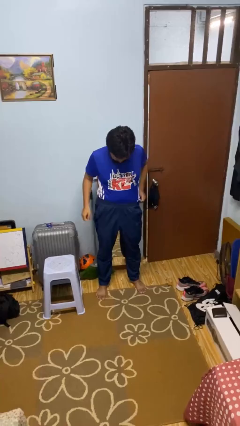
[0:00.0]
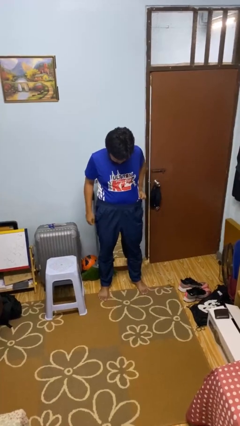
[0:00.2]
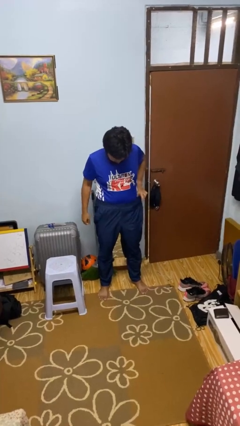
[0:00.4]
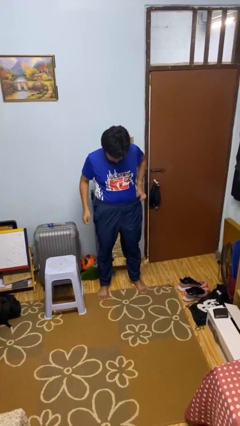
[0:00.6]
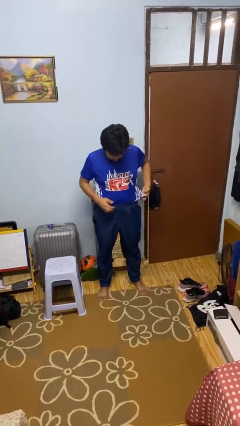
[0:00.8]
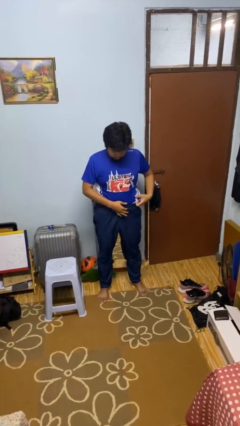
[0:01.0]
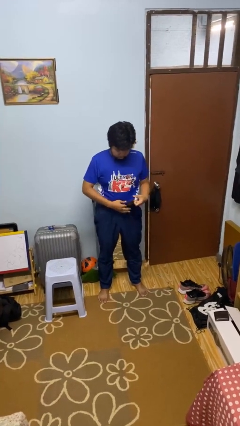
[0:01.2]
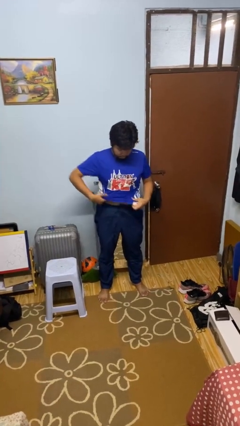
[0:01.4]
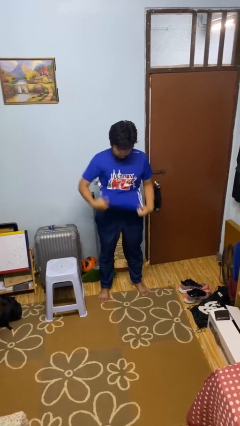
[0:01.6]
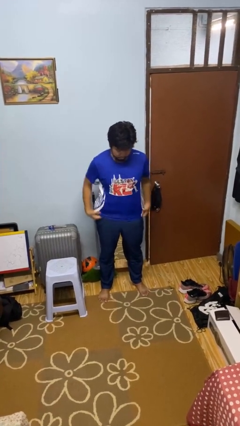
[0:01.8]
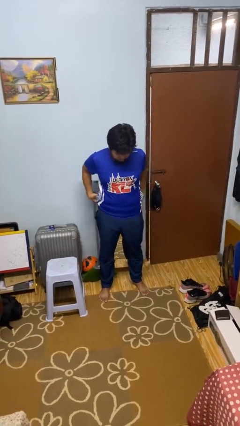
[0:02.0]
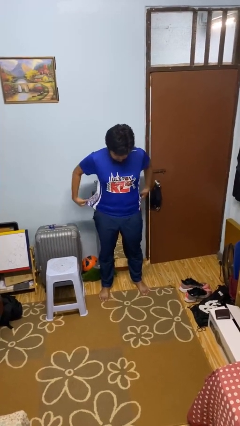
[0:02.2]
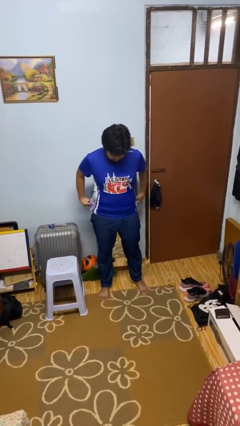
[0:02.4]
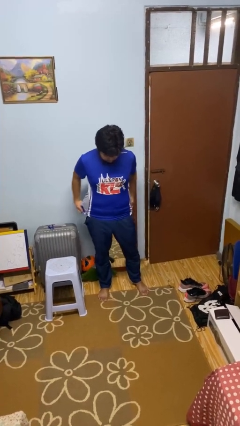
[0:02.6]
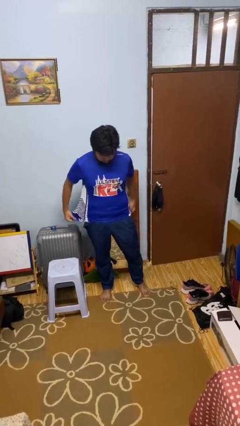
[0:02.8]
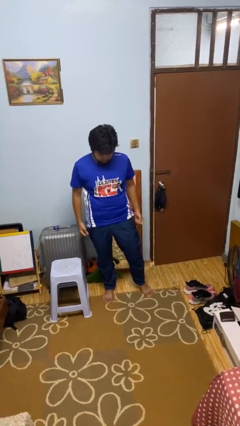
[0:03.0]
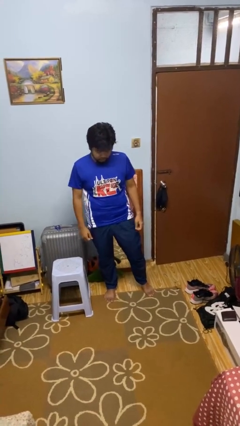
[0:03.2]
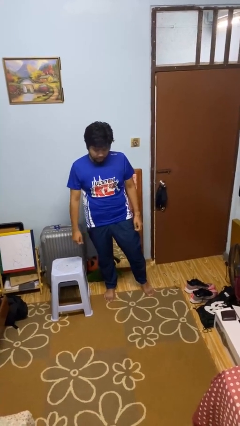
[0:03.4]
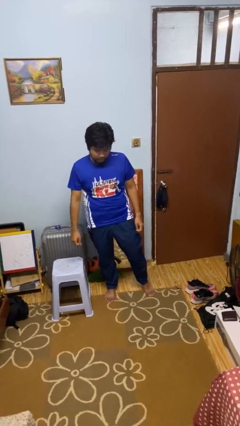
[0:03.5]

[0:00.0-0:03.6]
person untucks shirt

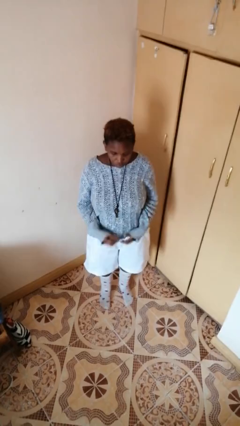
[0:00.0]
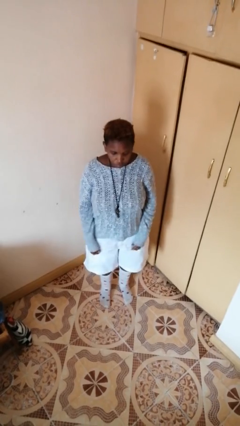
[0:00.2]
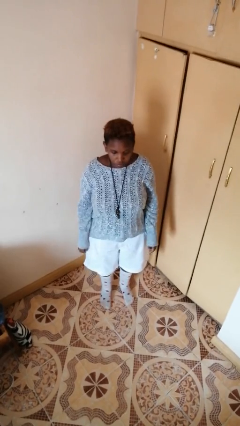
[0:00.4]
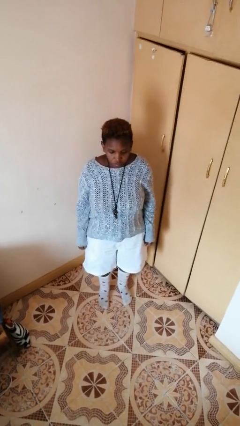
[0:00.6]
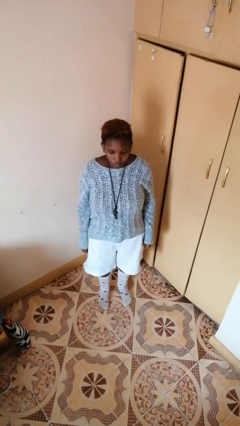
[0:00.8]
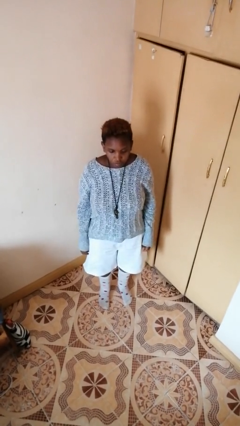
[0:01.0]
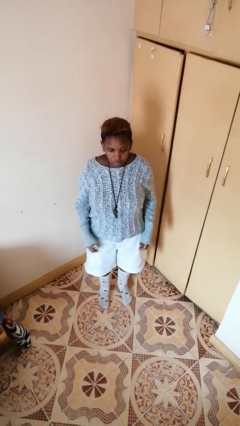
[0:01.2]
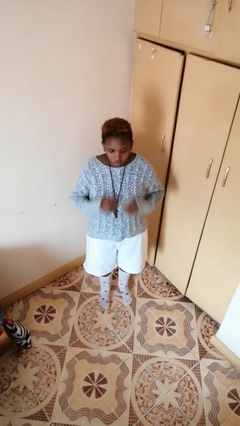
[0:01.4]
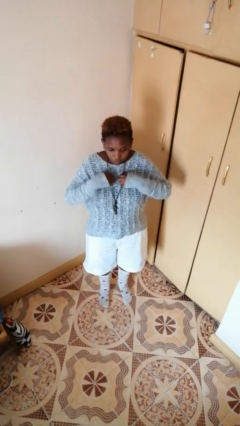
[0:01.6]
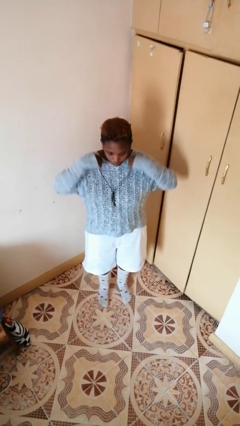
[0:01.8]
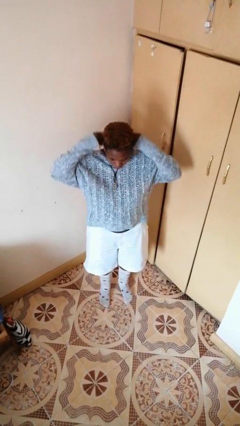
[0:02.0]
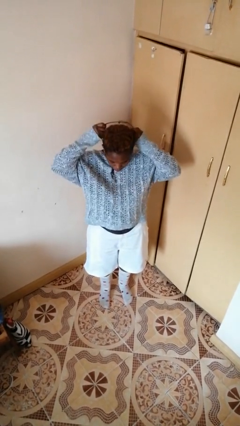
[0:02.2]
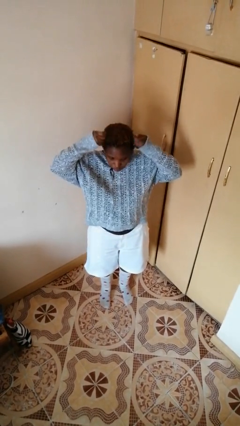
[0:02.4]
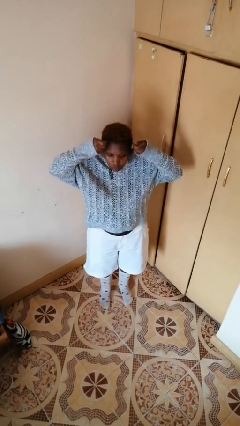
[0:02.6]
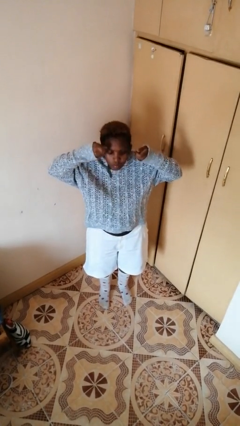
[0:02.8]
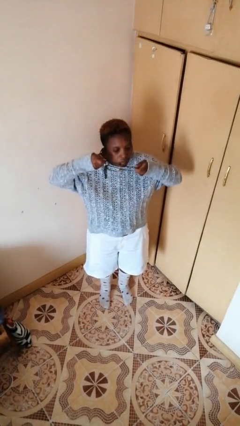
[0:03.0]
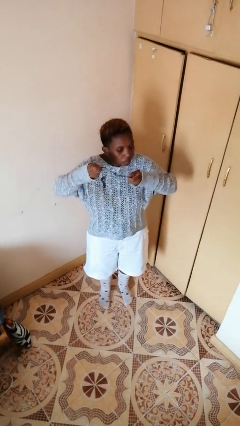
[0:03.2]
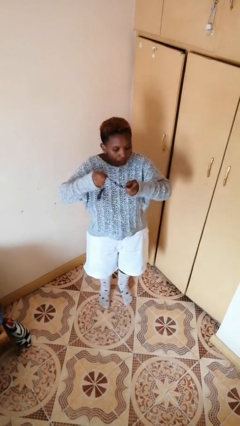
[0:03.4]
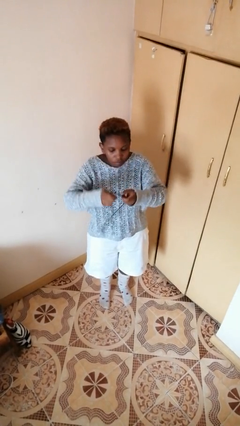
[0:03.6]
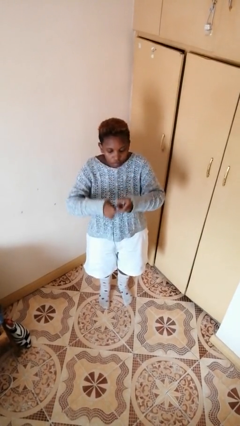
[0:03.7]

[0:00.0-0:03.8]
person takes off necklace

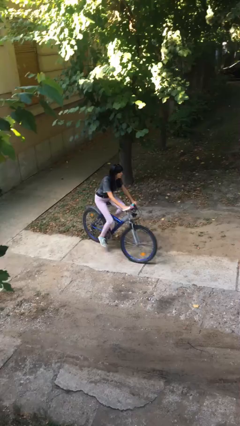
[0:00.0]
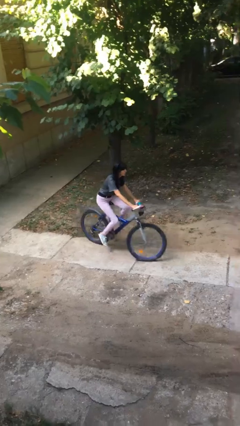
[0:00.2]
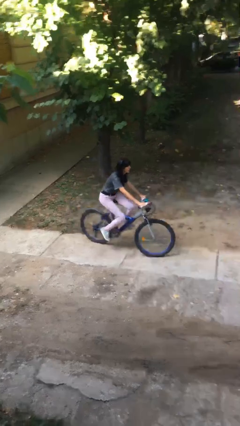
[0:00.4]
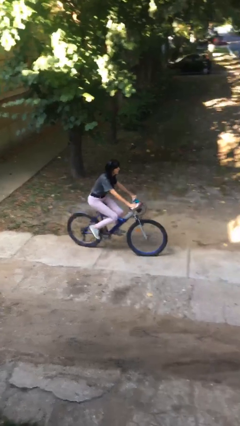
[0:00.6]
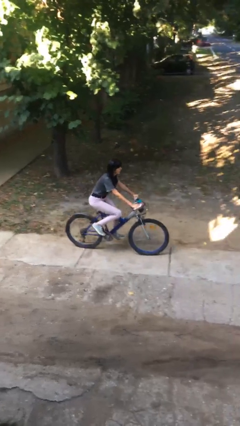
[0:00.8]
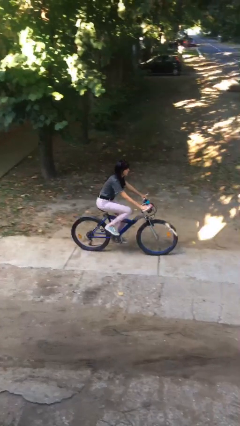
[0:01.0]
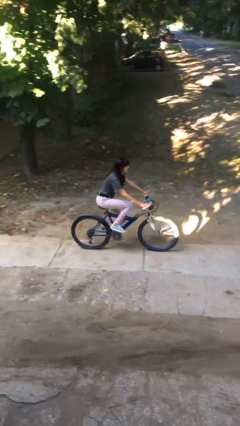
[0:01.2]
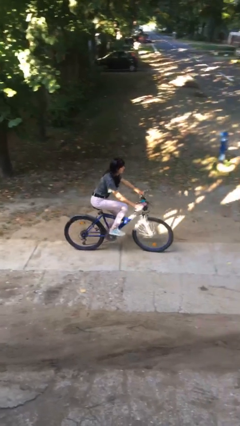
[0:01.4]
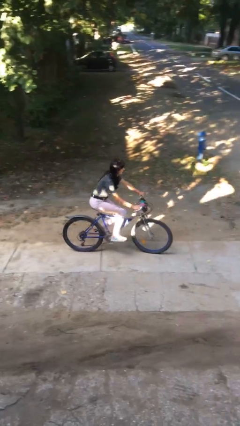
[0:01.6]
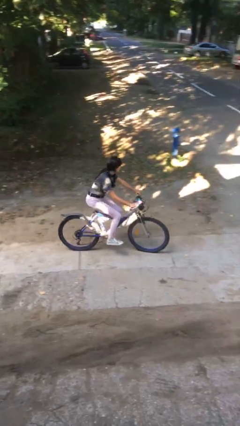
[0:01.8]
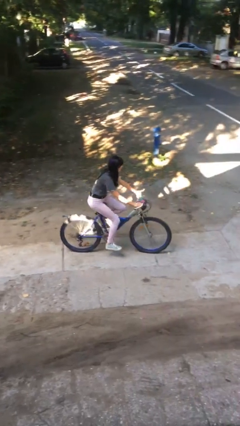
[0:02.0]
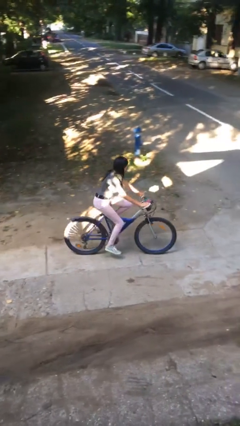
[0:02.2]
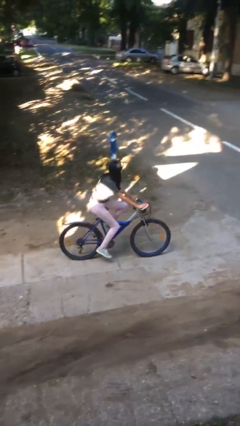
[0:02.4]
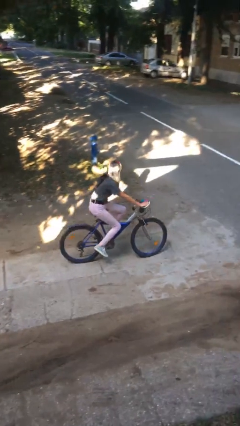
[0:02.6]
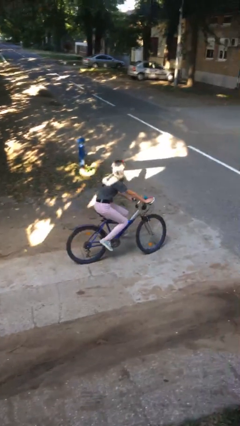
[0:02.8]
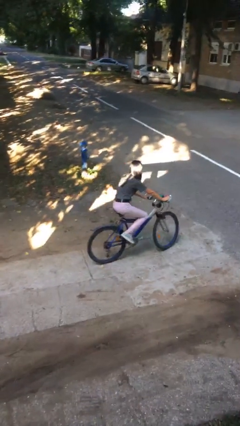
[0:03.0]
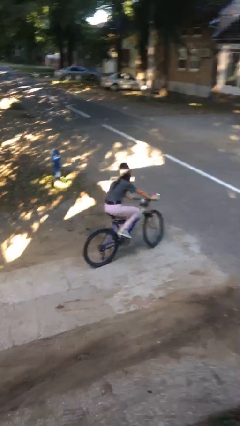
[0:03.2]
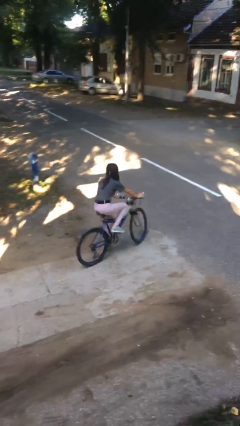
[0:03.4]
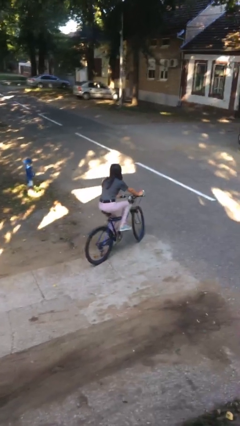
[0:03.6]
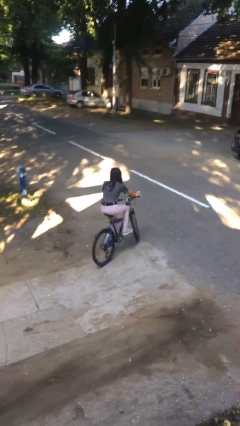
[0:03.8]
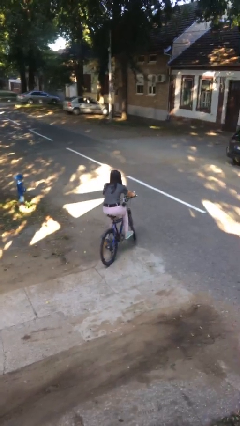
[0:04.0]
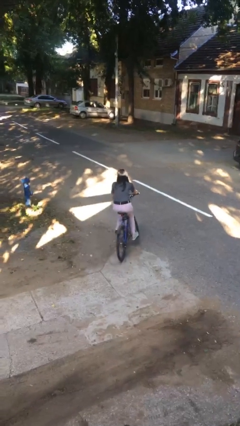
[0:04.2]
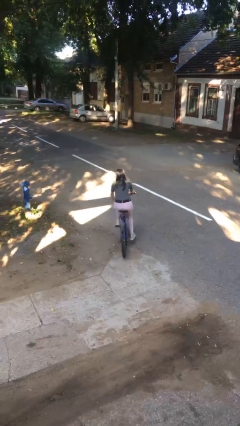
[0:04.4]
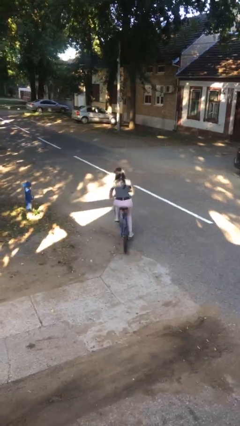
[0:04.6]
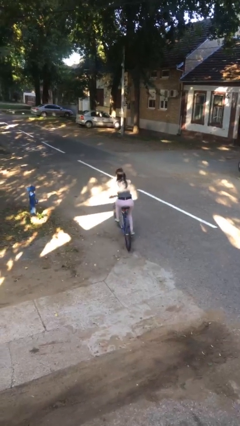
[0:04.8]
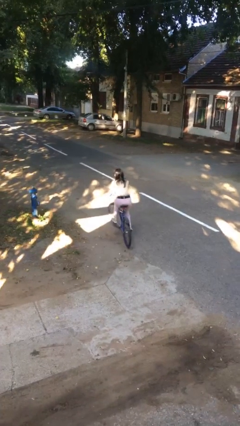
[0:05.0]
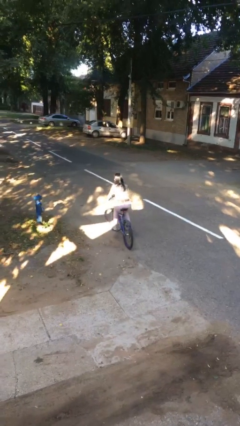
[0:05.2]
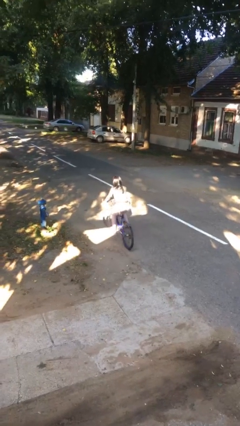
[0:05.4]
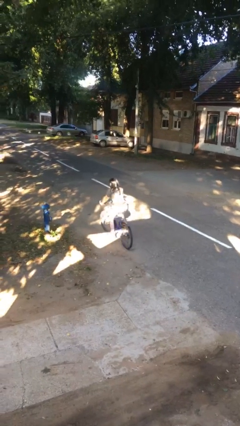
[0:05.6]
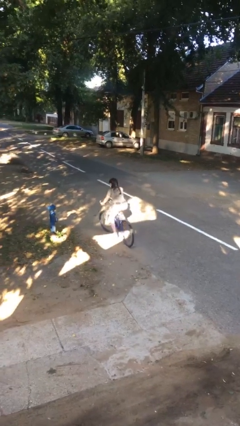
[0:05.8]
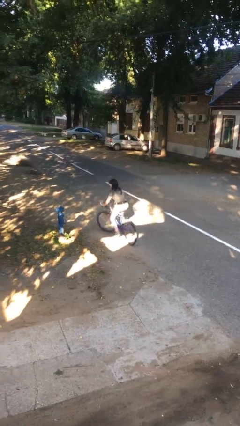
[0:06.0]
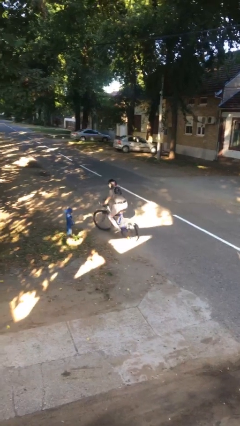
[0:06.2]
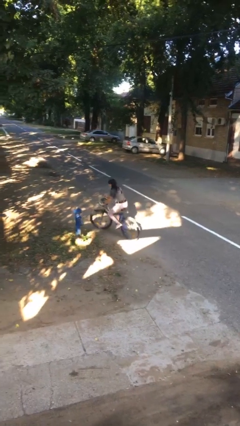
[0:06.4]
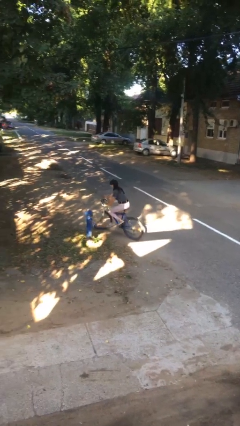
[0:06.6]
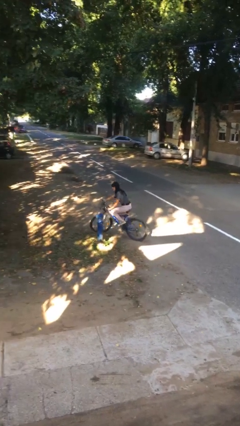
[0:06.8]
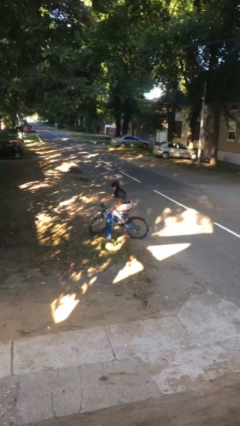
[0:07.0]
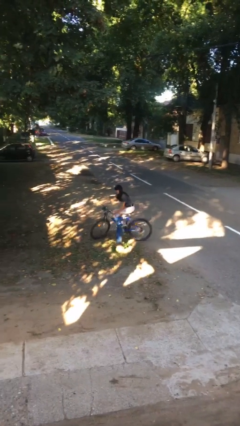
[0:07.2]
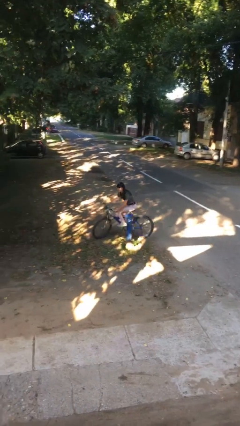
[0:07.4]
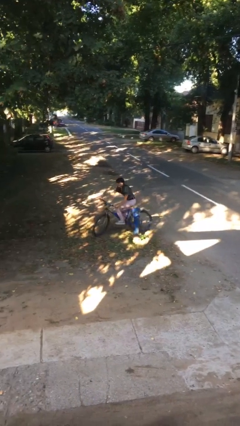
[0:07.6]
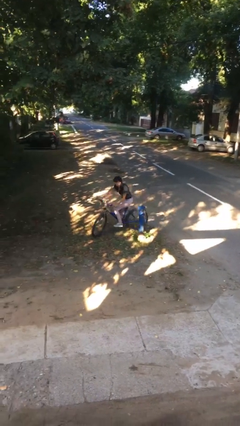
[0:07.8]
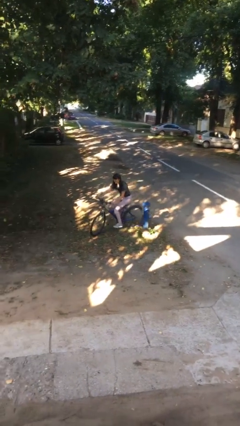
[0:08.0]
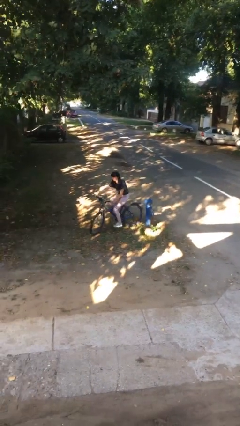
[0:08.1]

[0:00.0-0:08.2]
person rides bicycle

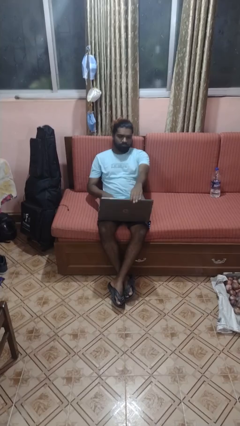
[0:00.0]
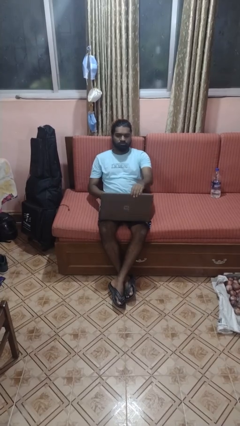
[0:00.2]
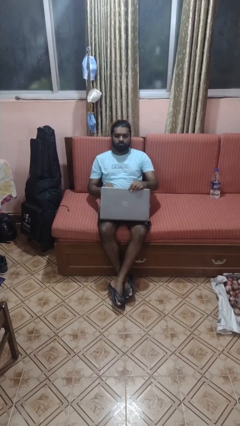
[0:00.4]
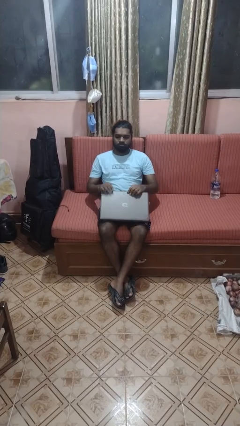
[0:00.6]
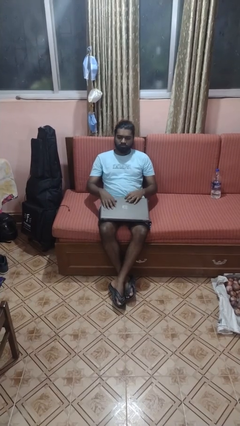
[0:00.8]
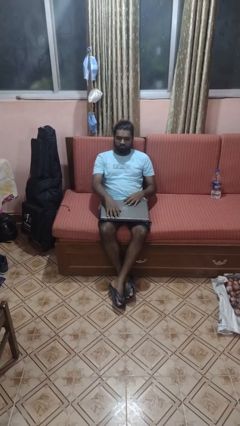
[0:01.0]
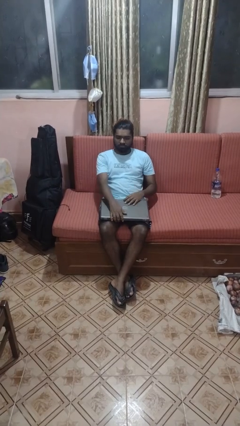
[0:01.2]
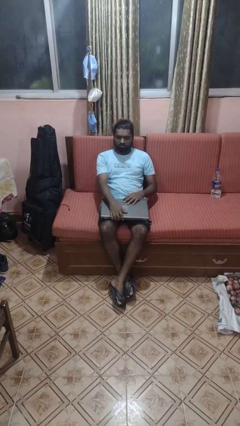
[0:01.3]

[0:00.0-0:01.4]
person closes laptop

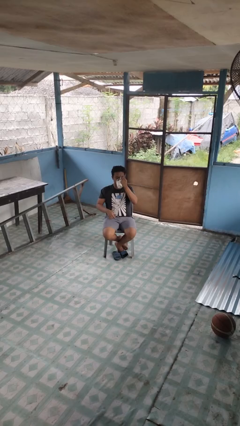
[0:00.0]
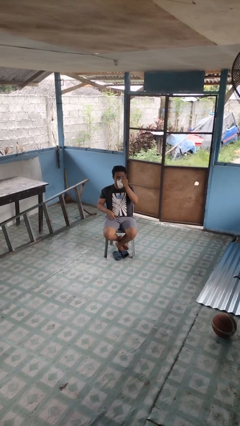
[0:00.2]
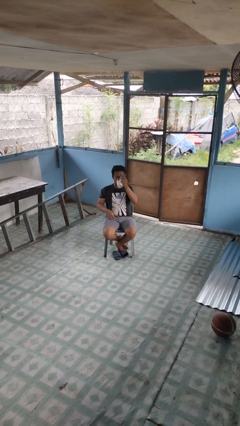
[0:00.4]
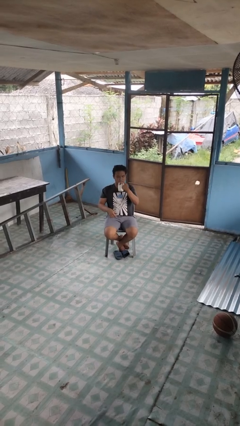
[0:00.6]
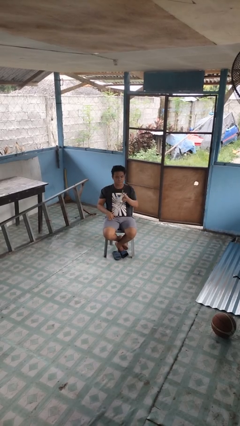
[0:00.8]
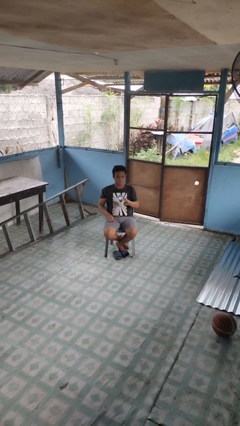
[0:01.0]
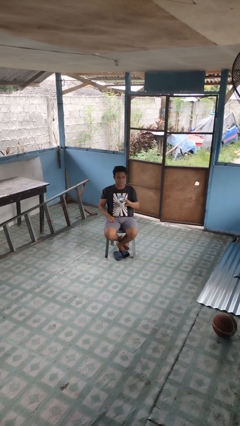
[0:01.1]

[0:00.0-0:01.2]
person drinks from mug
